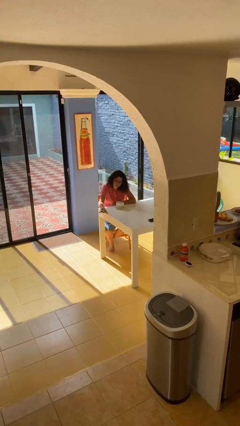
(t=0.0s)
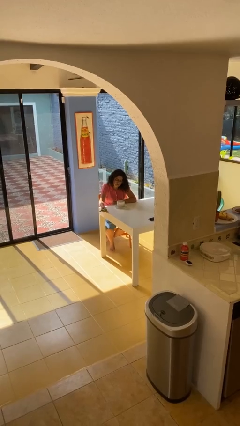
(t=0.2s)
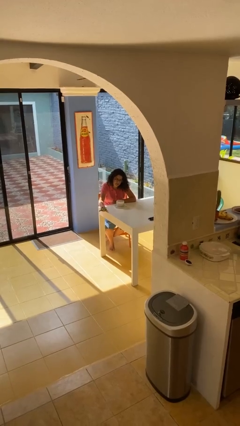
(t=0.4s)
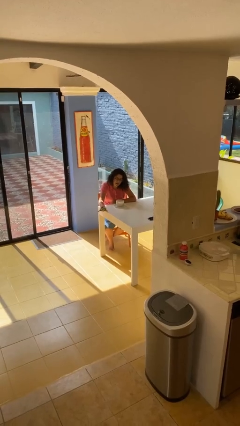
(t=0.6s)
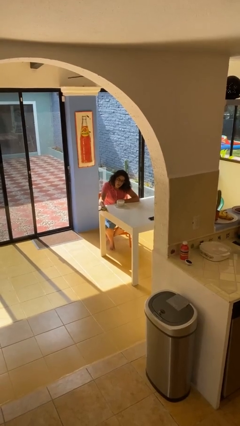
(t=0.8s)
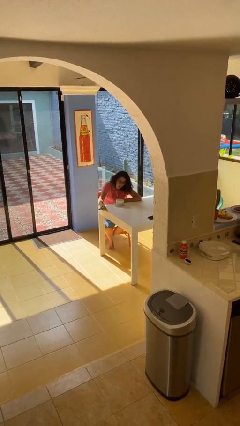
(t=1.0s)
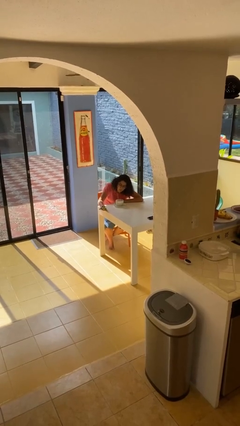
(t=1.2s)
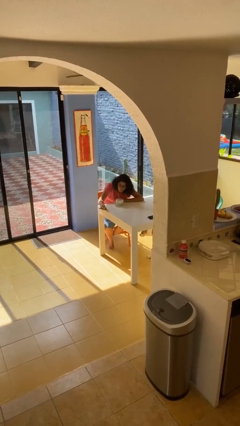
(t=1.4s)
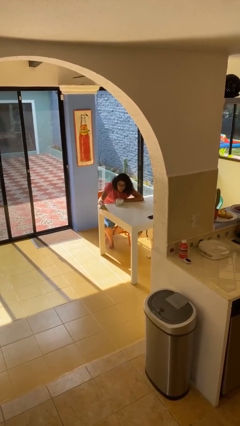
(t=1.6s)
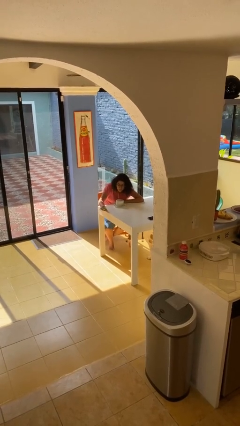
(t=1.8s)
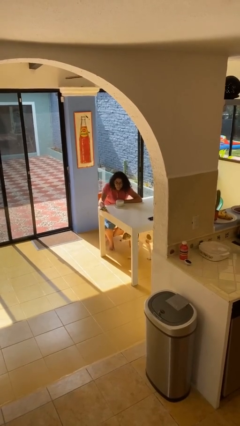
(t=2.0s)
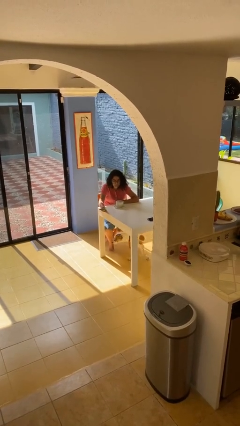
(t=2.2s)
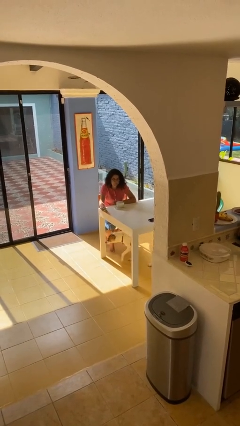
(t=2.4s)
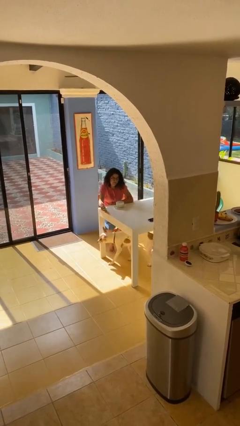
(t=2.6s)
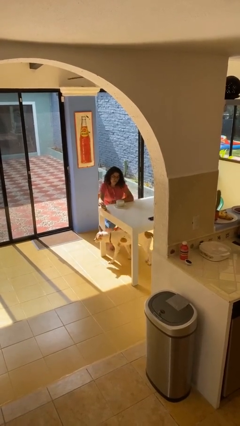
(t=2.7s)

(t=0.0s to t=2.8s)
person extinguishes candle

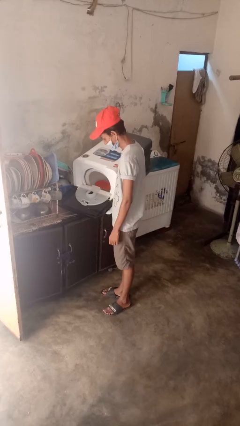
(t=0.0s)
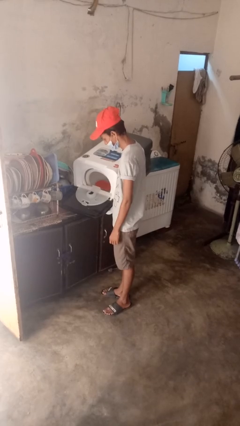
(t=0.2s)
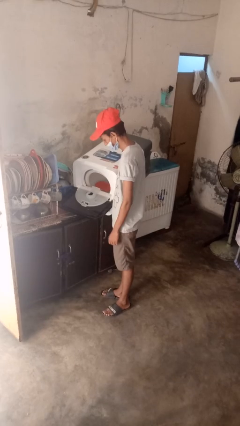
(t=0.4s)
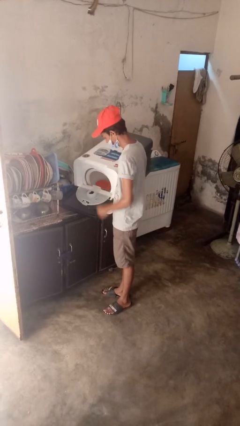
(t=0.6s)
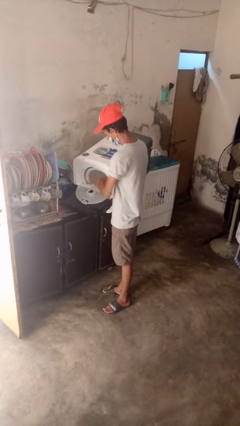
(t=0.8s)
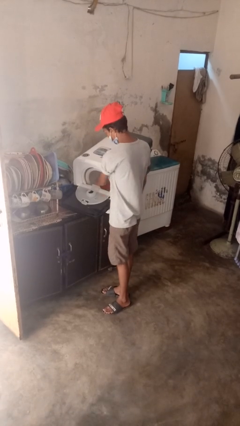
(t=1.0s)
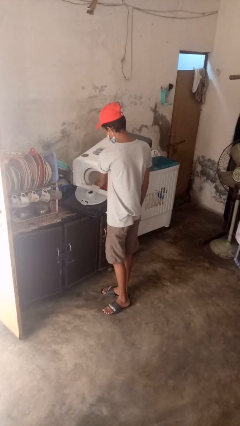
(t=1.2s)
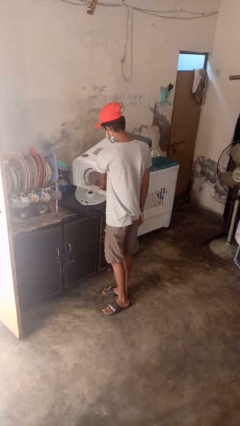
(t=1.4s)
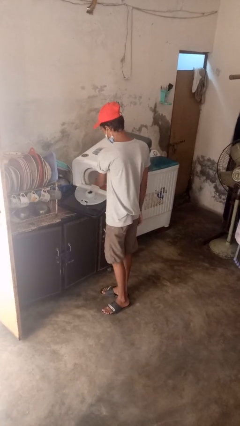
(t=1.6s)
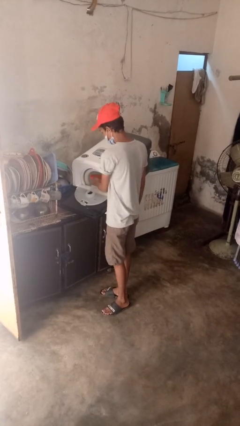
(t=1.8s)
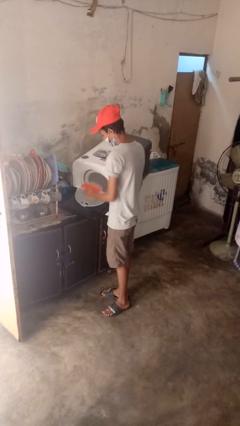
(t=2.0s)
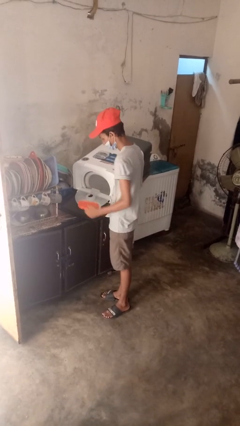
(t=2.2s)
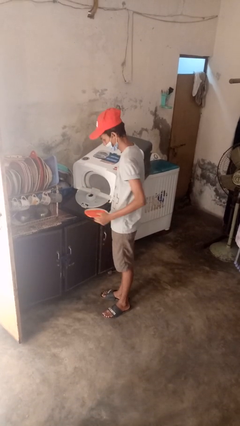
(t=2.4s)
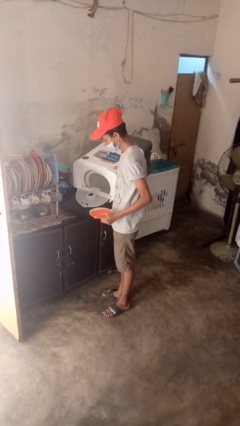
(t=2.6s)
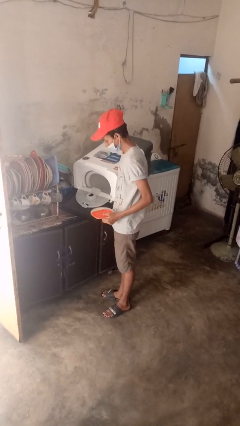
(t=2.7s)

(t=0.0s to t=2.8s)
person unloads dishwasher

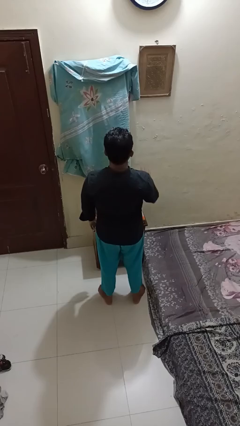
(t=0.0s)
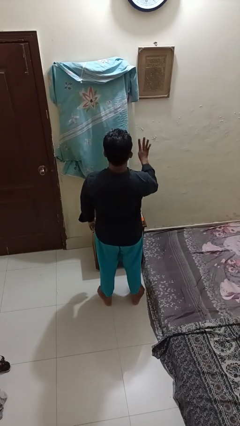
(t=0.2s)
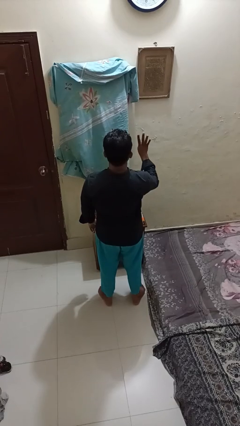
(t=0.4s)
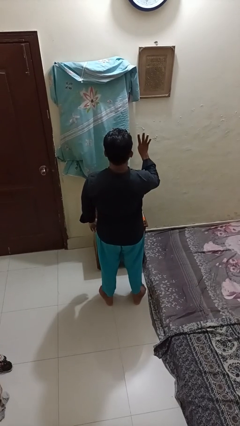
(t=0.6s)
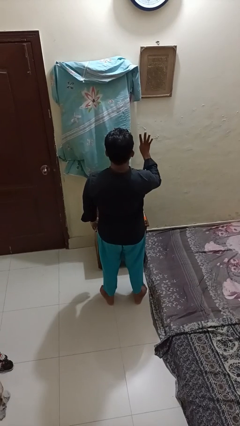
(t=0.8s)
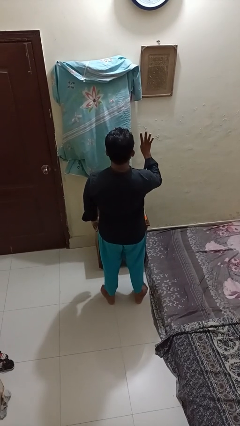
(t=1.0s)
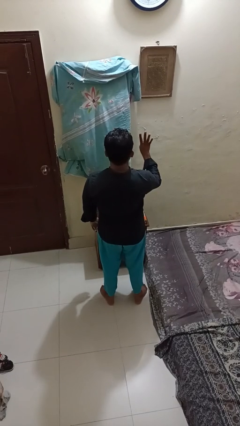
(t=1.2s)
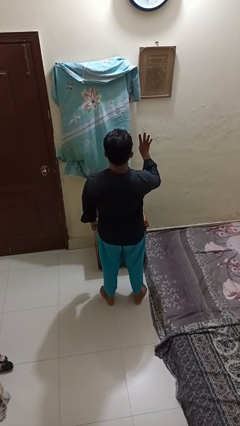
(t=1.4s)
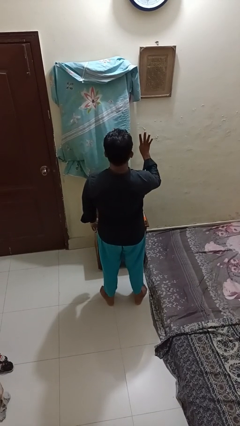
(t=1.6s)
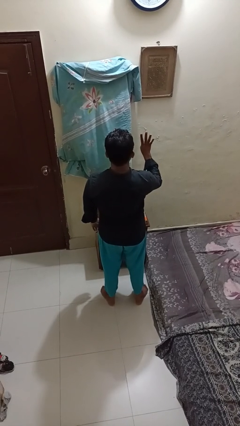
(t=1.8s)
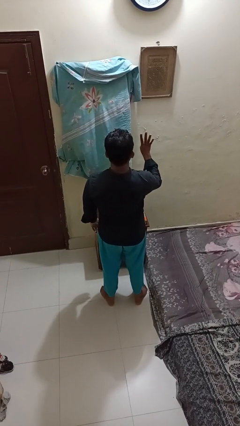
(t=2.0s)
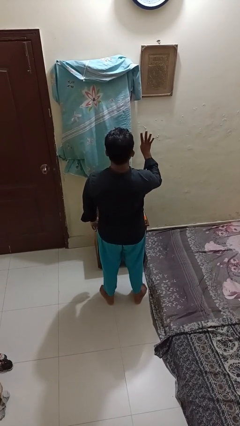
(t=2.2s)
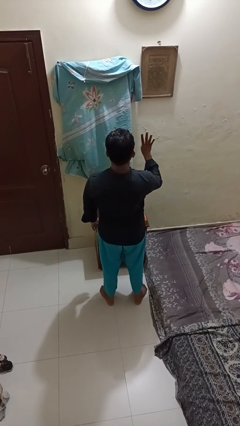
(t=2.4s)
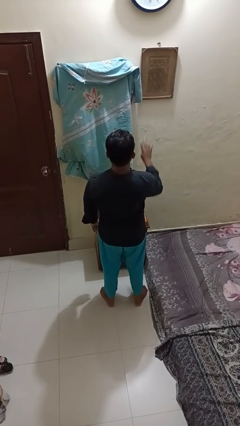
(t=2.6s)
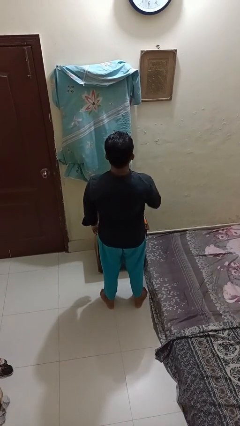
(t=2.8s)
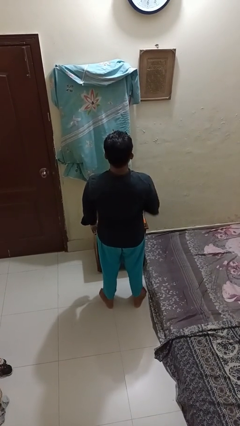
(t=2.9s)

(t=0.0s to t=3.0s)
person gestures number four

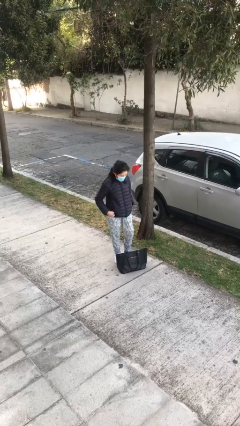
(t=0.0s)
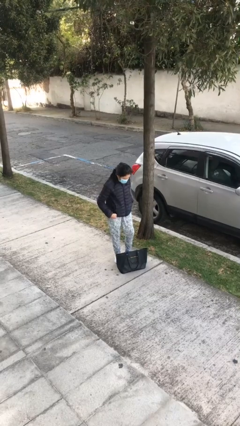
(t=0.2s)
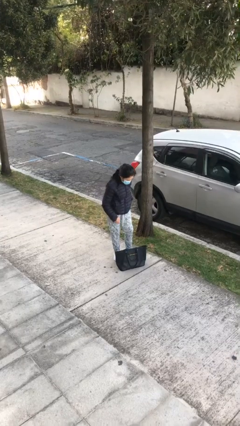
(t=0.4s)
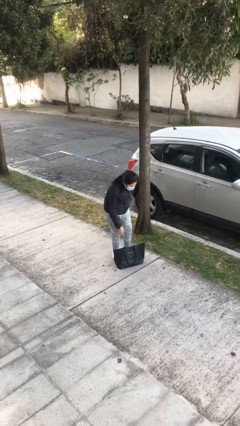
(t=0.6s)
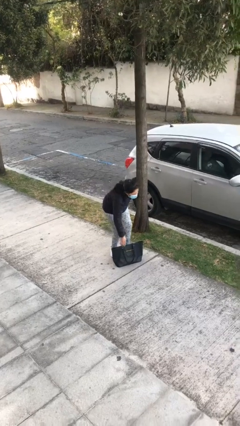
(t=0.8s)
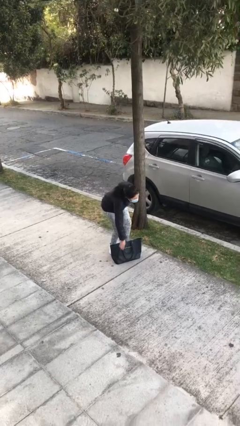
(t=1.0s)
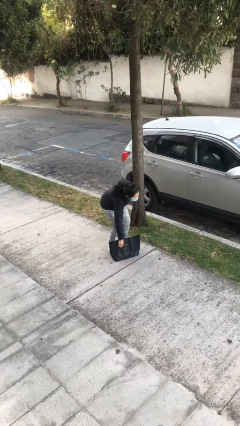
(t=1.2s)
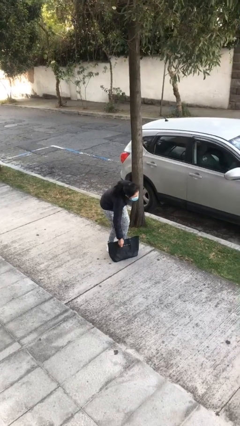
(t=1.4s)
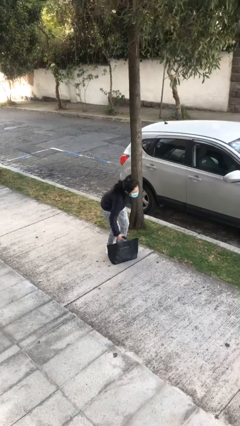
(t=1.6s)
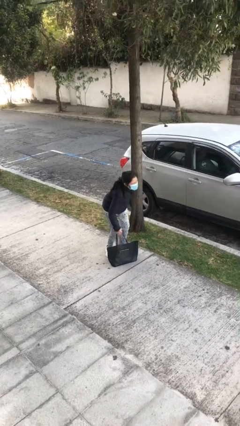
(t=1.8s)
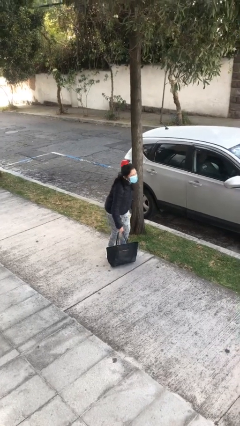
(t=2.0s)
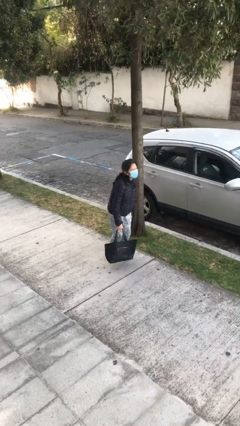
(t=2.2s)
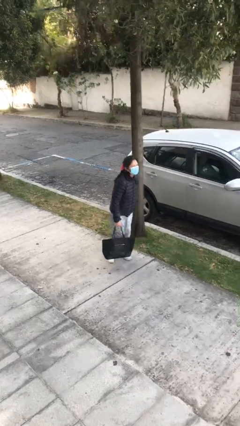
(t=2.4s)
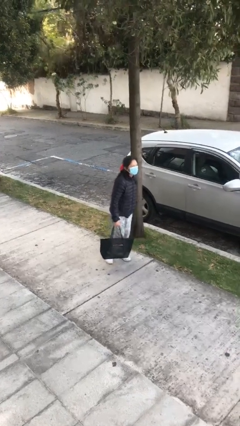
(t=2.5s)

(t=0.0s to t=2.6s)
person picks up object from floor

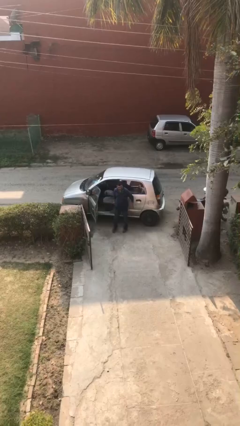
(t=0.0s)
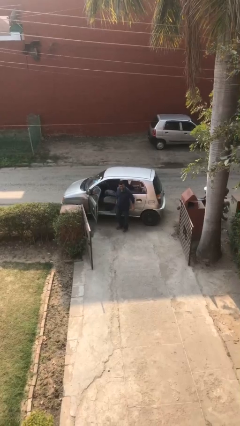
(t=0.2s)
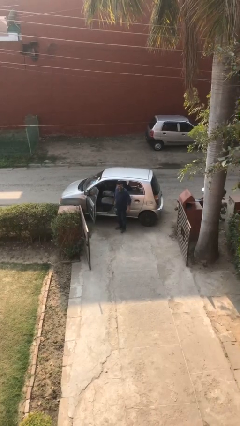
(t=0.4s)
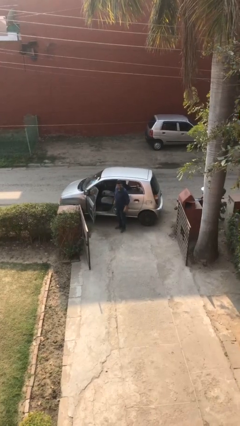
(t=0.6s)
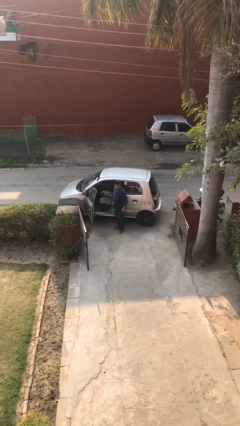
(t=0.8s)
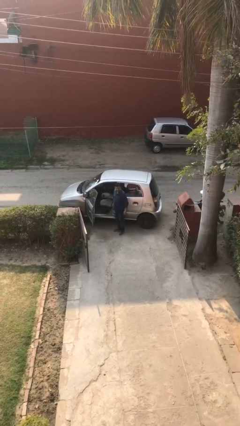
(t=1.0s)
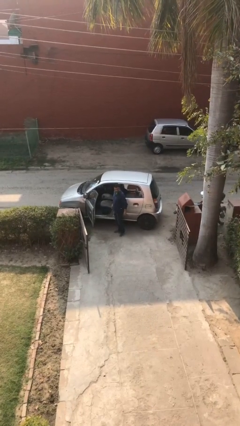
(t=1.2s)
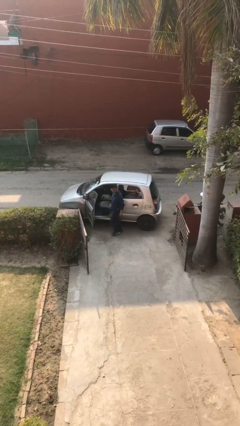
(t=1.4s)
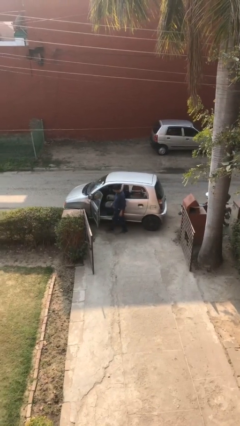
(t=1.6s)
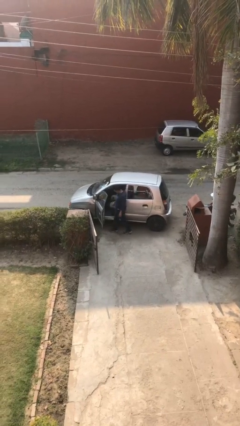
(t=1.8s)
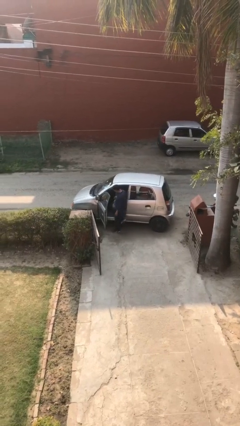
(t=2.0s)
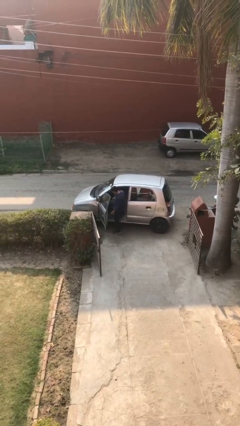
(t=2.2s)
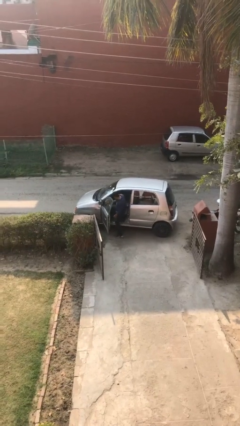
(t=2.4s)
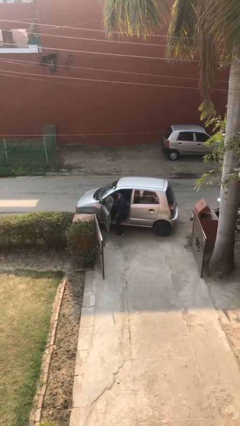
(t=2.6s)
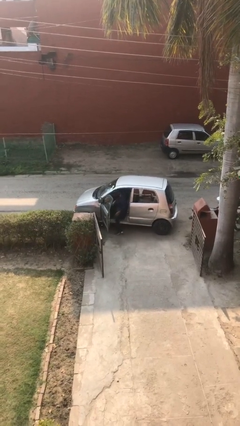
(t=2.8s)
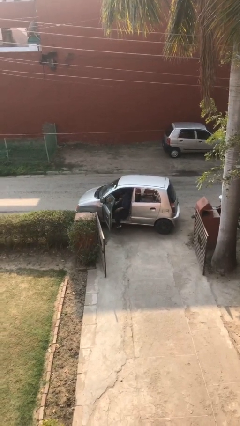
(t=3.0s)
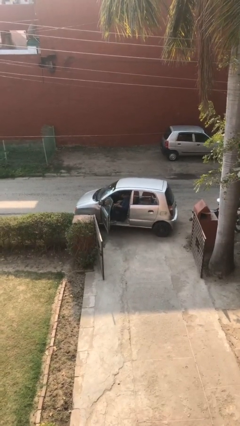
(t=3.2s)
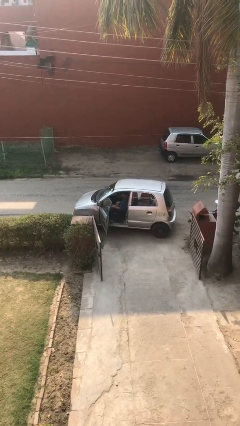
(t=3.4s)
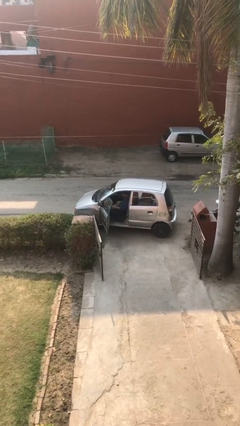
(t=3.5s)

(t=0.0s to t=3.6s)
person enters car

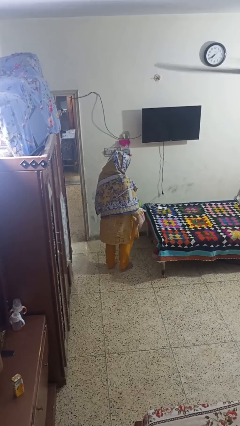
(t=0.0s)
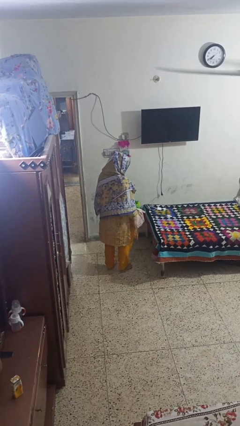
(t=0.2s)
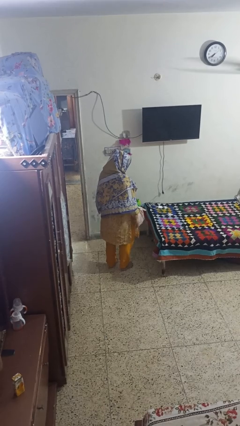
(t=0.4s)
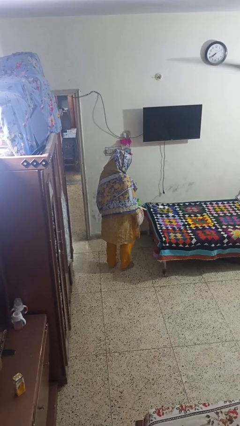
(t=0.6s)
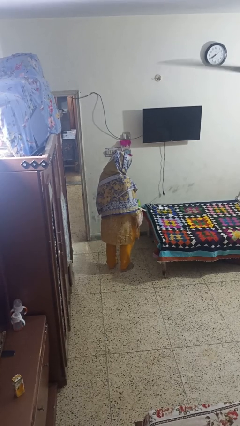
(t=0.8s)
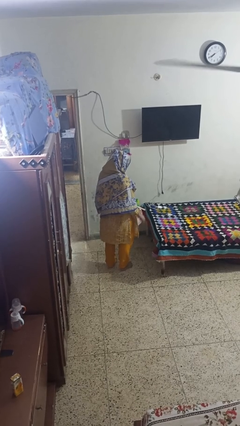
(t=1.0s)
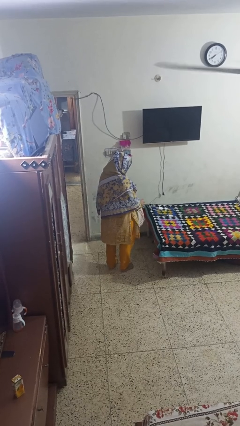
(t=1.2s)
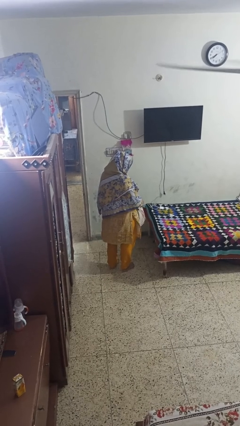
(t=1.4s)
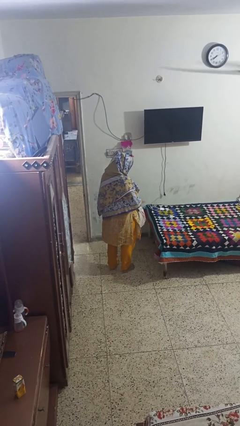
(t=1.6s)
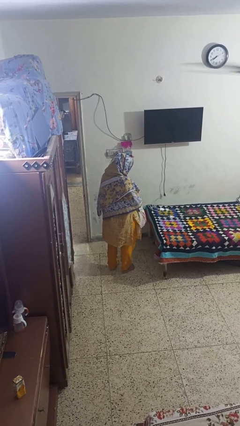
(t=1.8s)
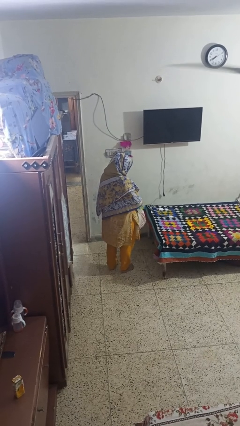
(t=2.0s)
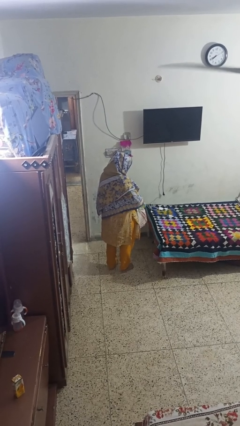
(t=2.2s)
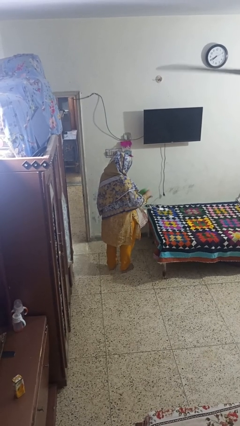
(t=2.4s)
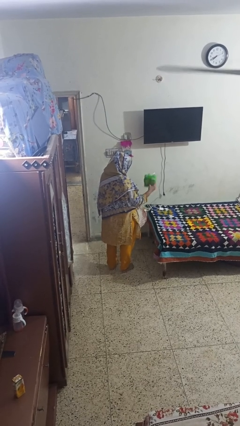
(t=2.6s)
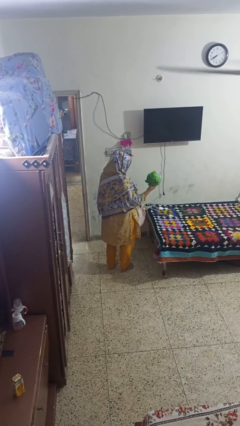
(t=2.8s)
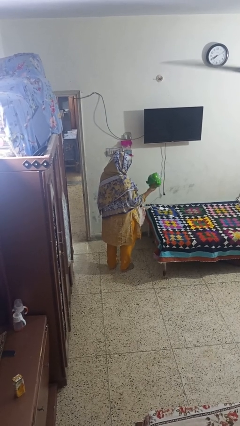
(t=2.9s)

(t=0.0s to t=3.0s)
person takes object from bag
